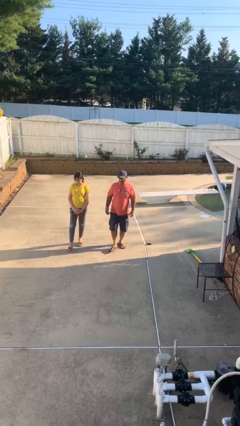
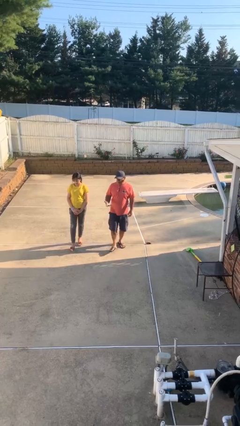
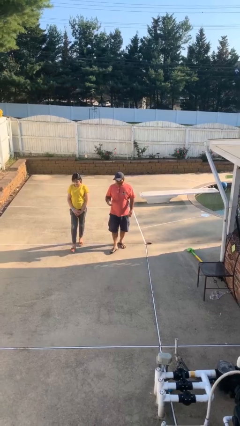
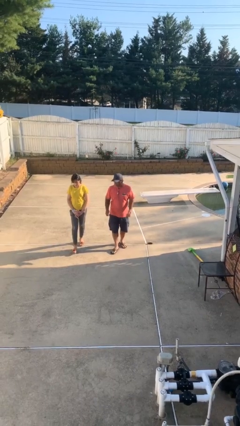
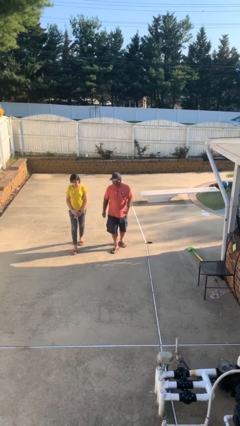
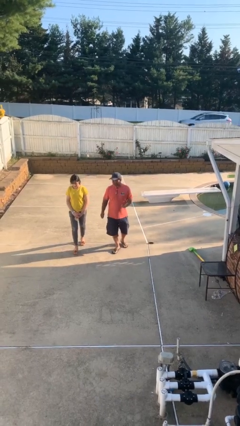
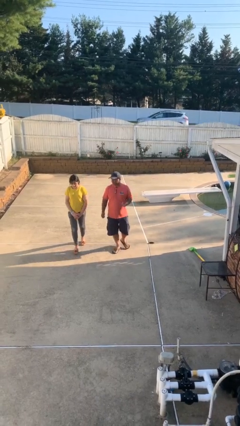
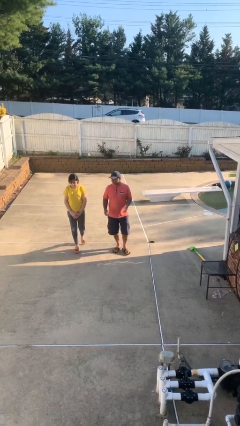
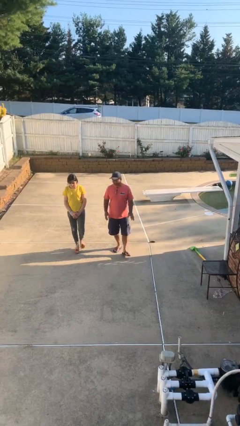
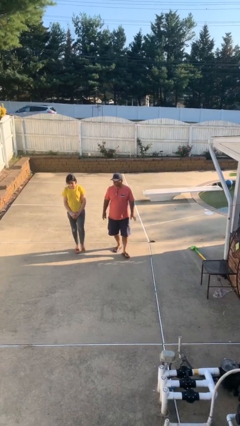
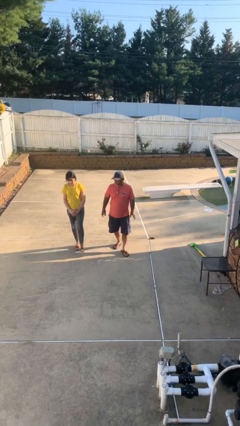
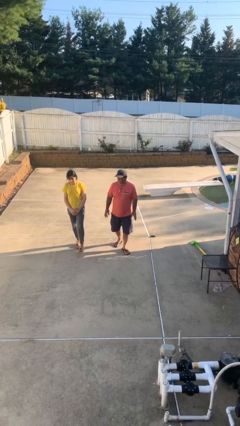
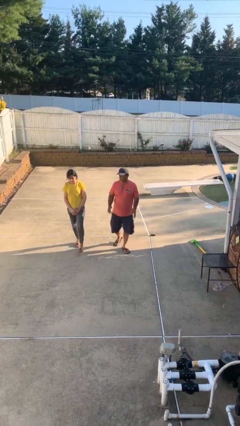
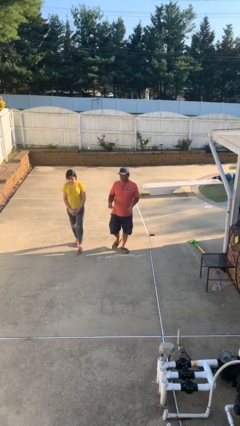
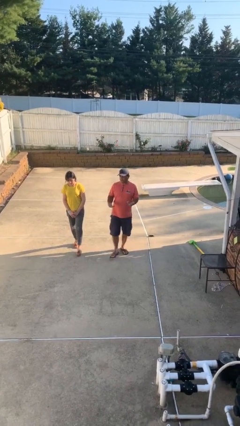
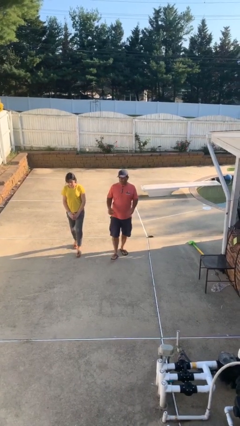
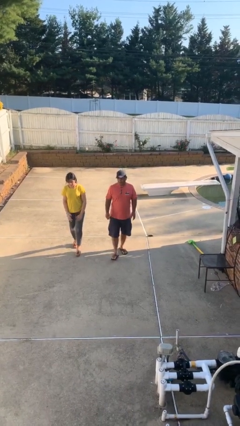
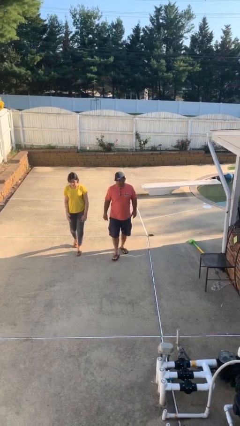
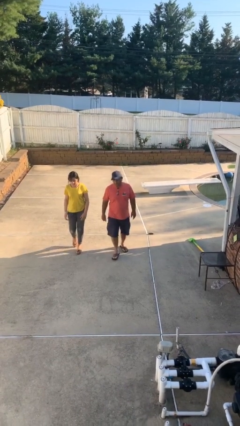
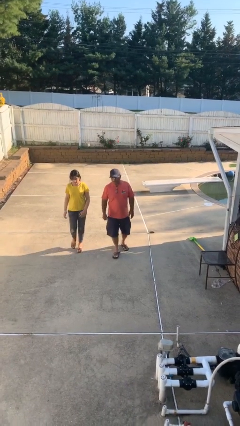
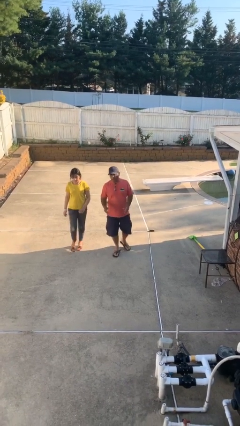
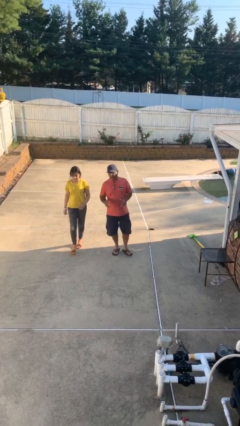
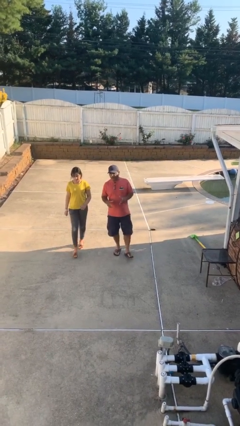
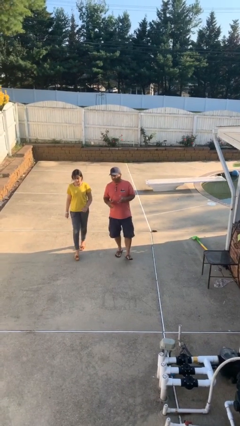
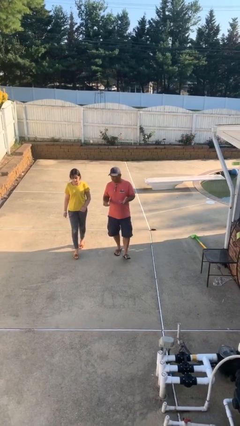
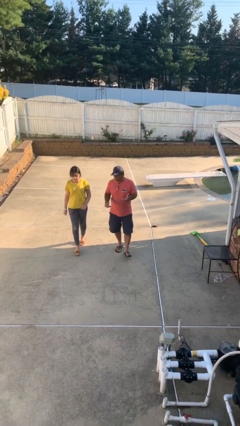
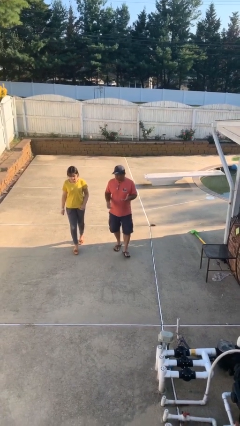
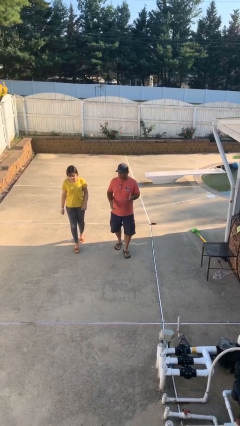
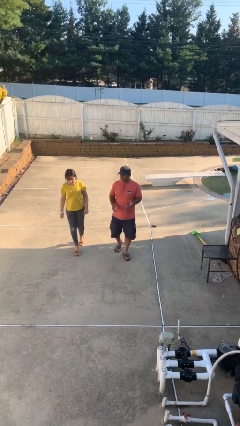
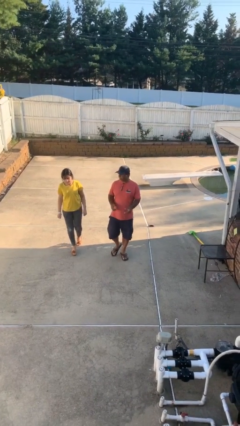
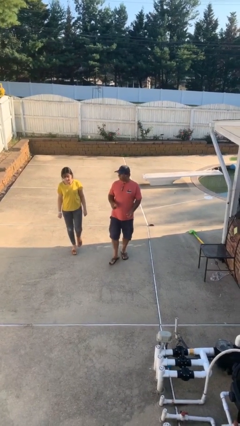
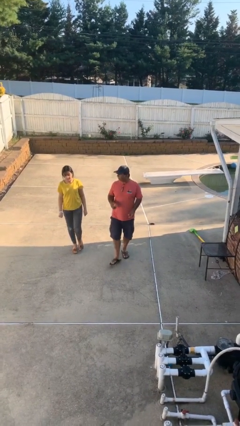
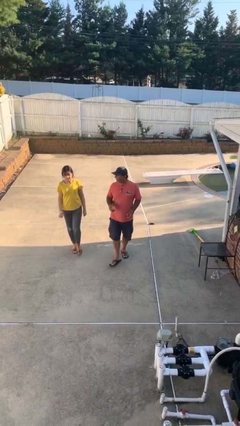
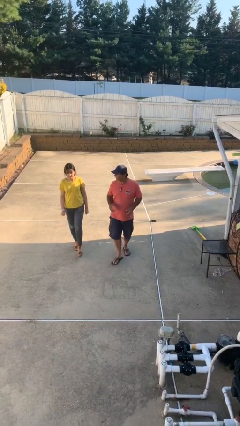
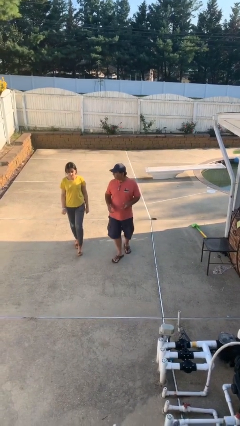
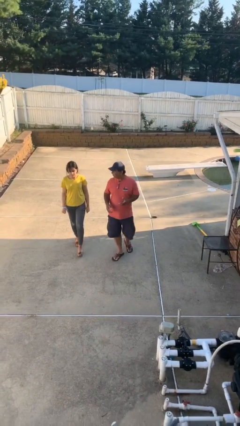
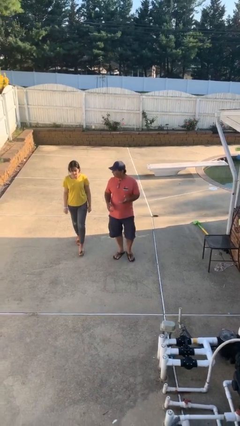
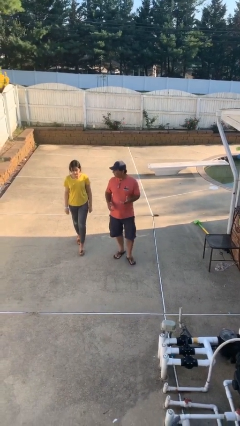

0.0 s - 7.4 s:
person talks to person

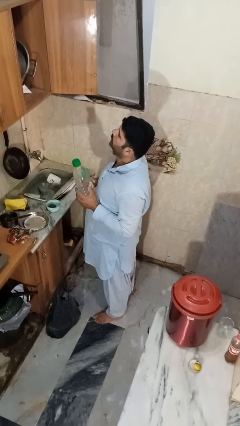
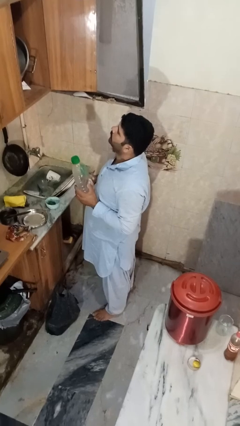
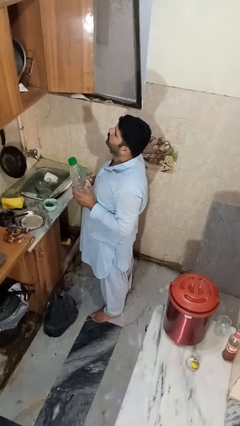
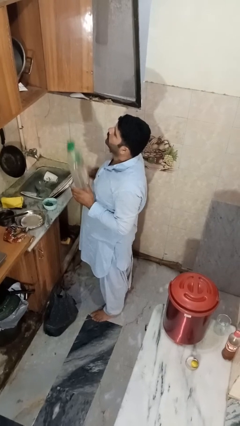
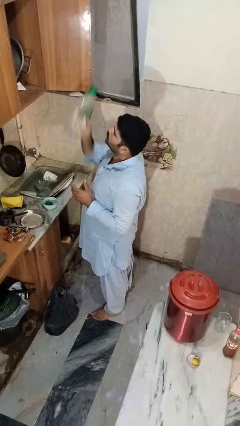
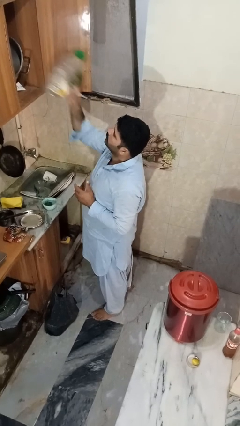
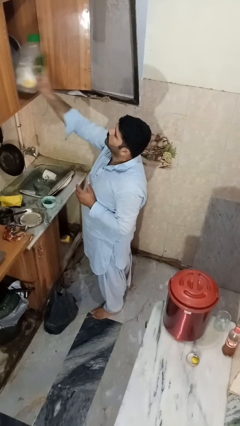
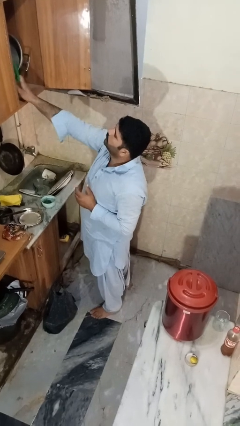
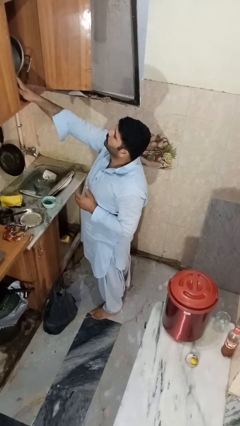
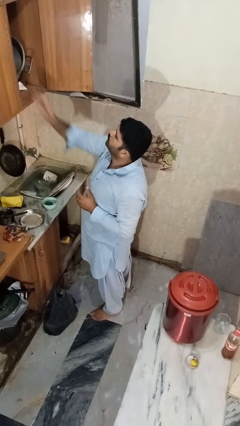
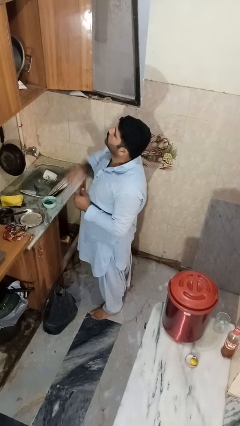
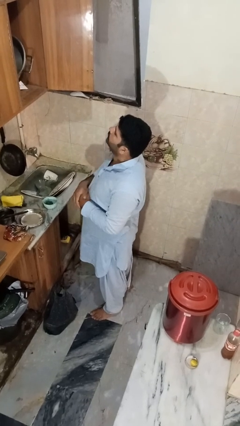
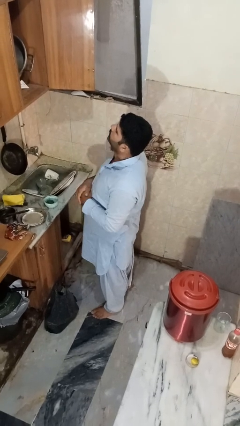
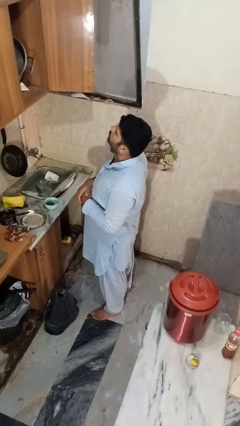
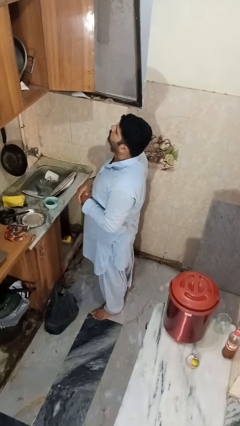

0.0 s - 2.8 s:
person puts object in cabinet

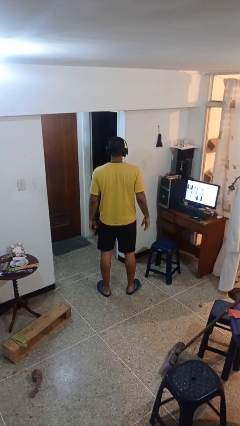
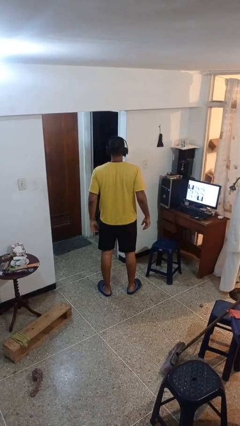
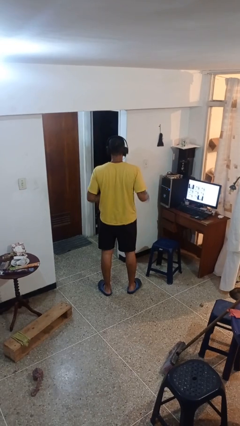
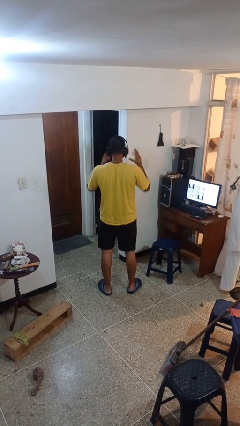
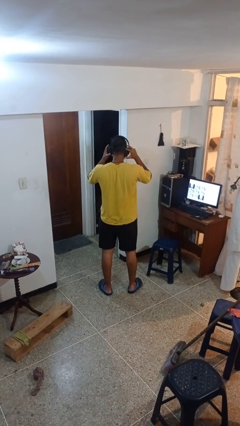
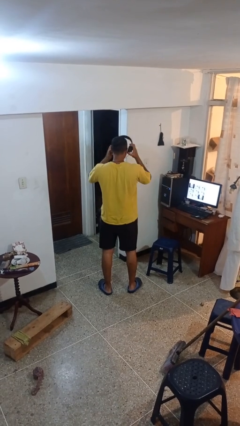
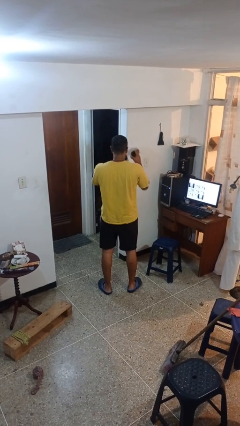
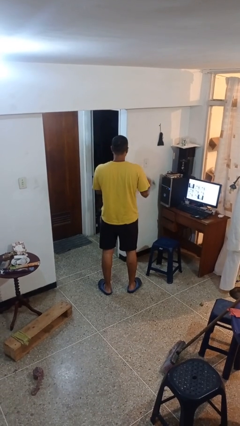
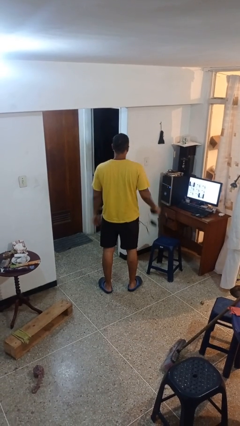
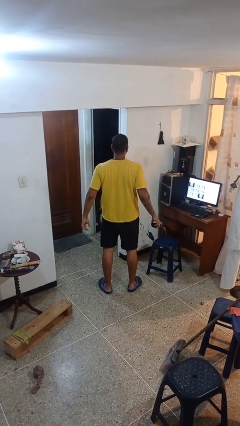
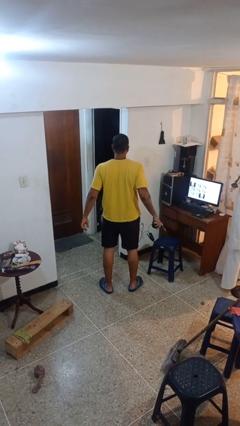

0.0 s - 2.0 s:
person takes off headphones

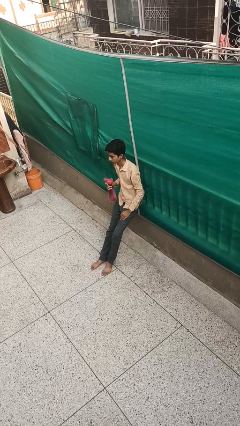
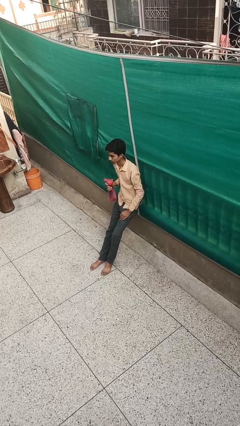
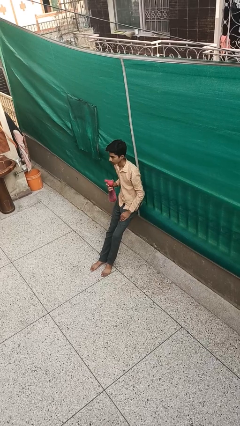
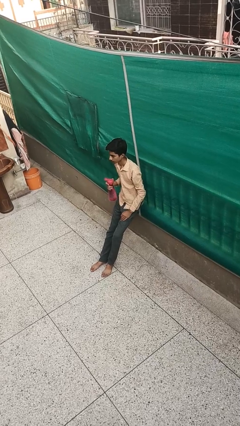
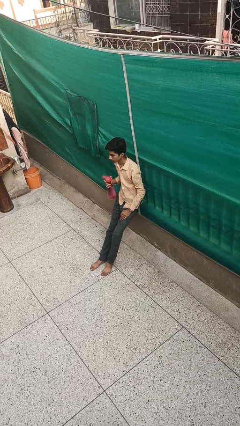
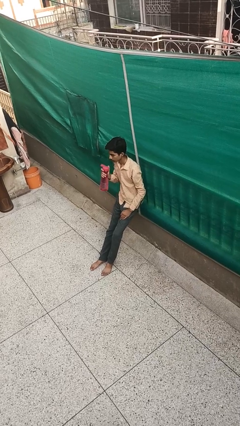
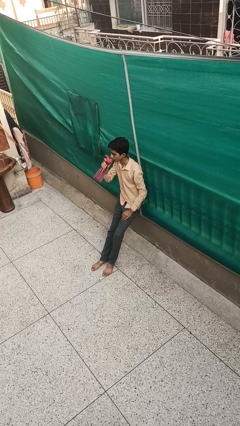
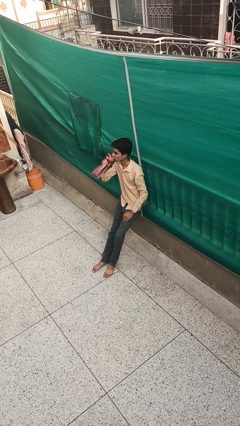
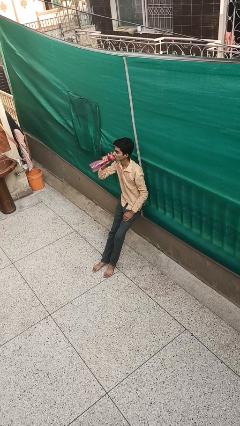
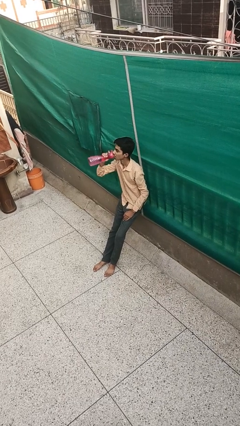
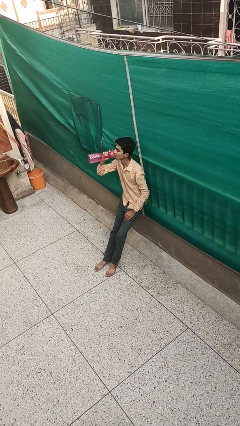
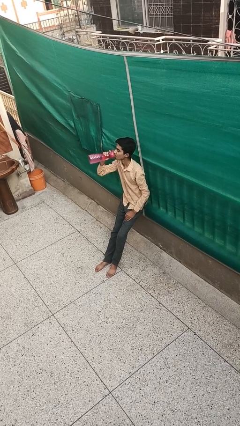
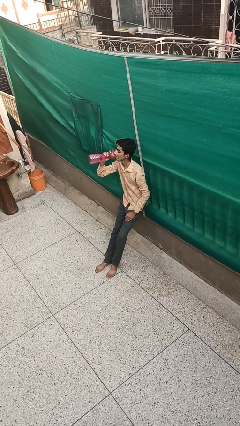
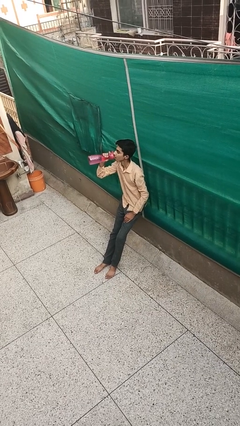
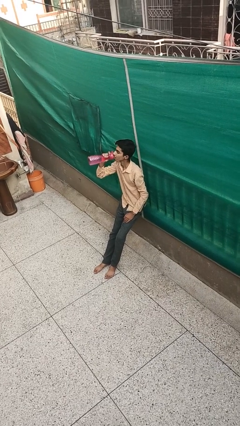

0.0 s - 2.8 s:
person drinks from bottle

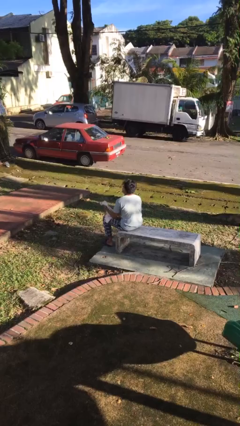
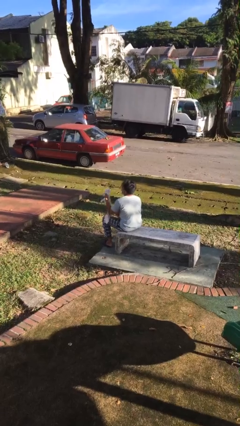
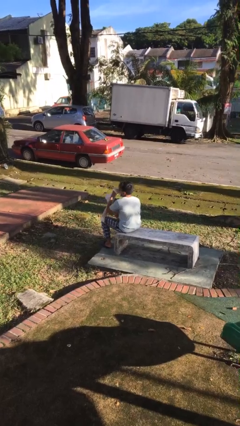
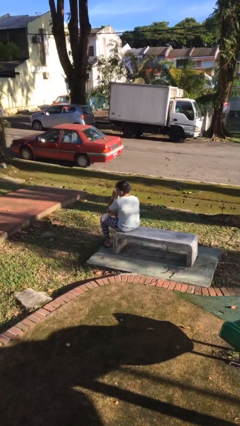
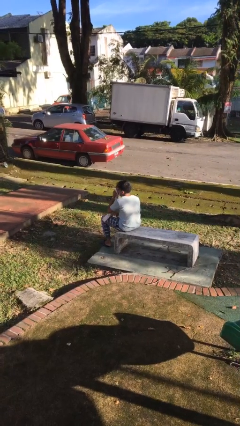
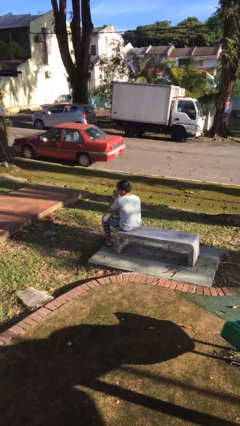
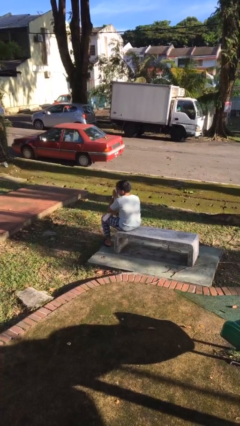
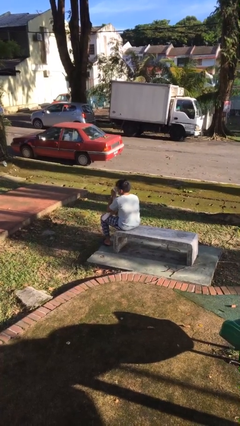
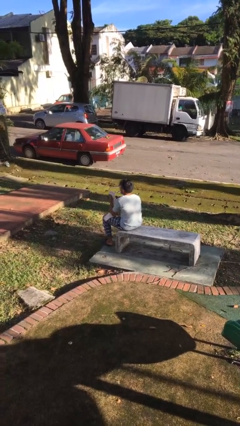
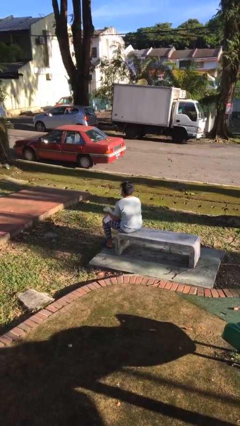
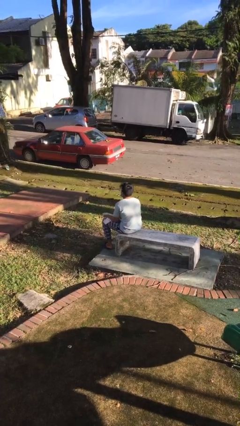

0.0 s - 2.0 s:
person blows nose

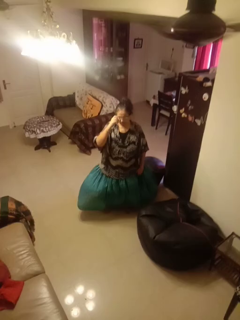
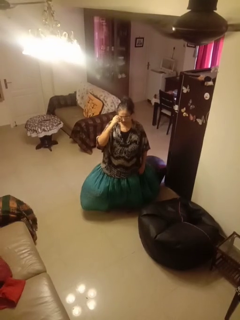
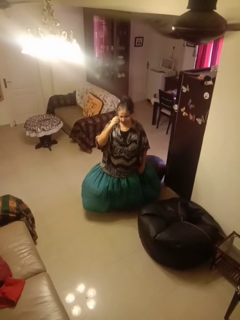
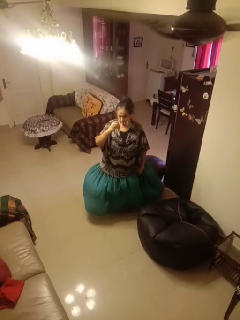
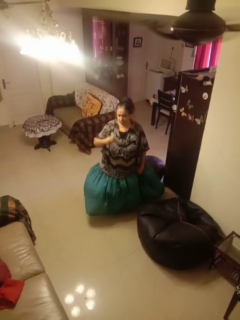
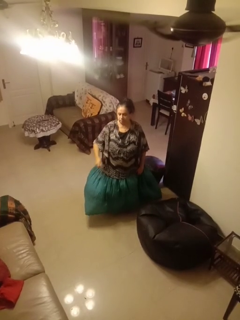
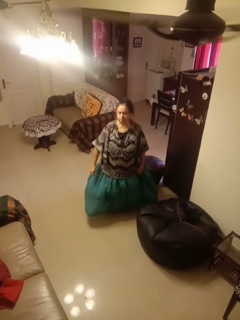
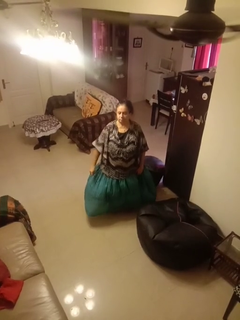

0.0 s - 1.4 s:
person takes off glasses
